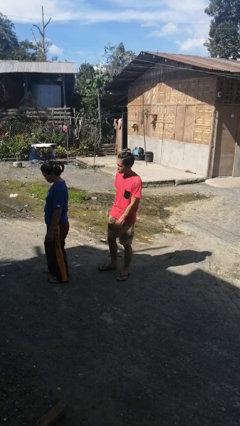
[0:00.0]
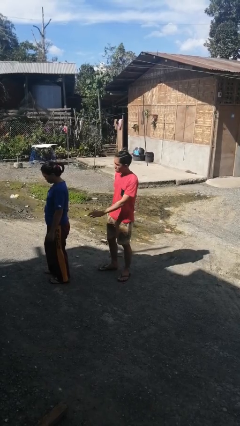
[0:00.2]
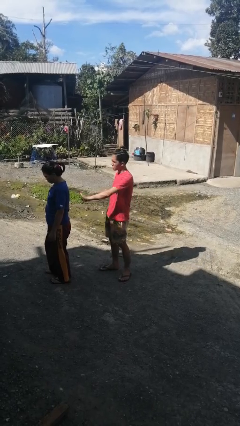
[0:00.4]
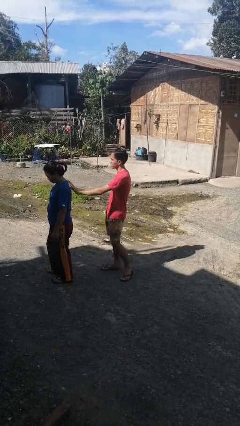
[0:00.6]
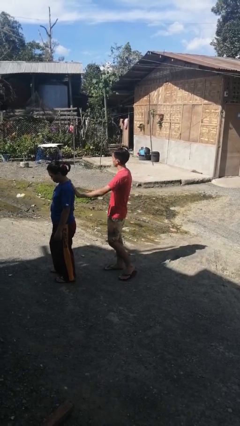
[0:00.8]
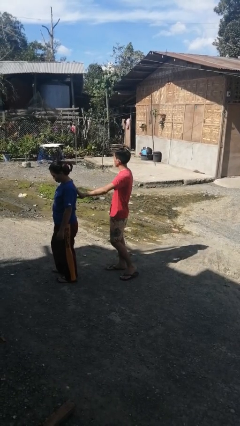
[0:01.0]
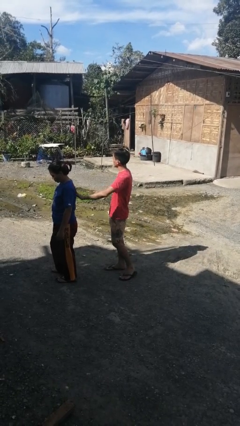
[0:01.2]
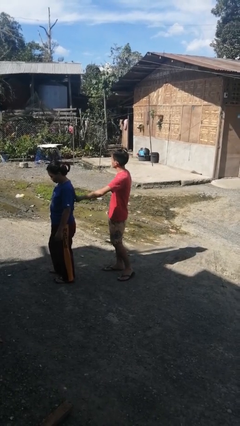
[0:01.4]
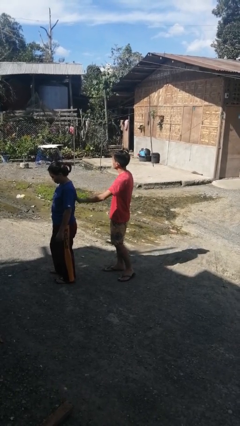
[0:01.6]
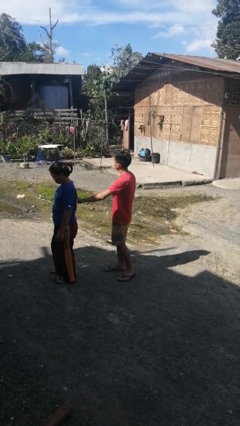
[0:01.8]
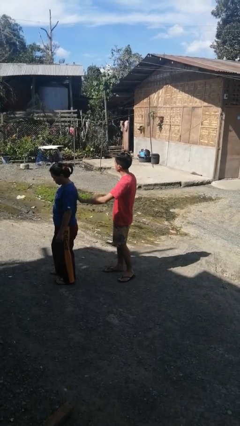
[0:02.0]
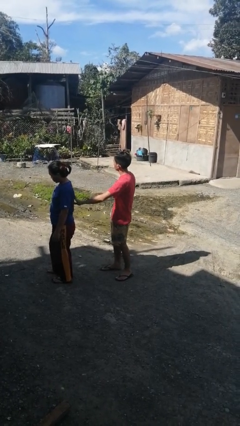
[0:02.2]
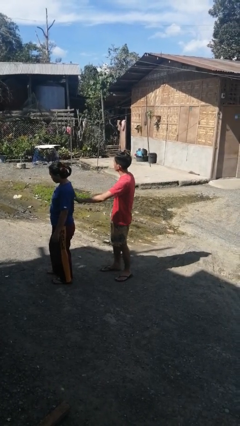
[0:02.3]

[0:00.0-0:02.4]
person touches back of person

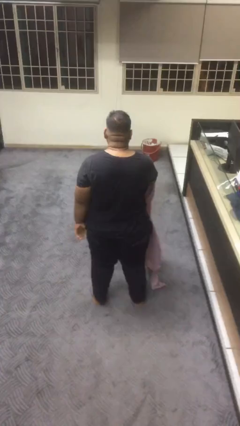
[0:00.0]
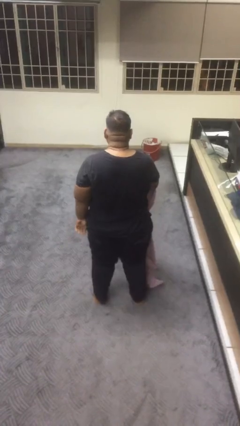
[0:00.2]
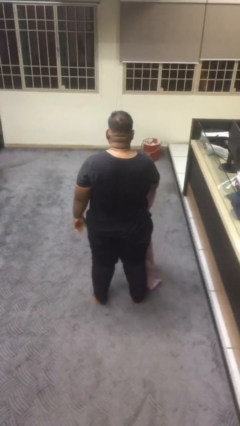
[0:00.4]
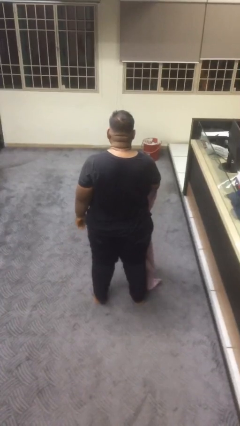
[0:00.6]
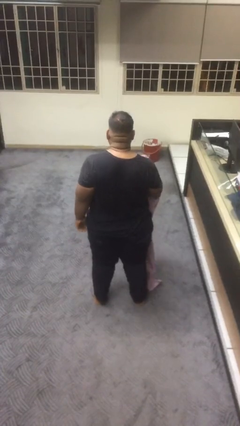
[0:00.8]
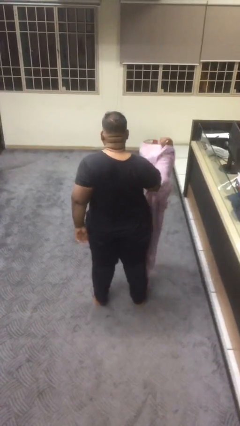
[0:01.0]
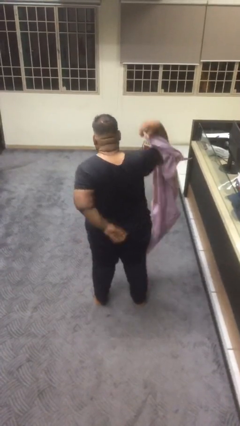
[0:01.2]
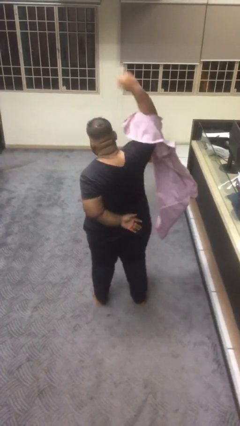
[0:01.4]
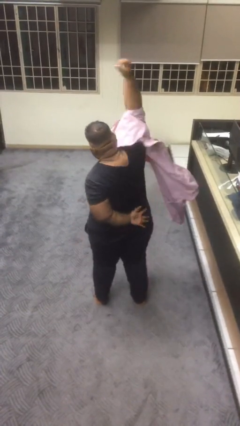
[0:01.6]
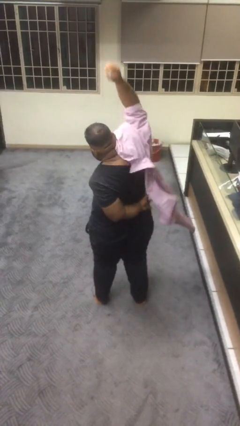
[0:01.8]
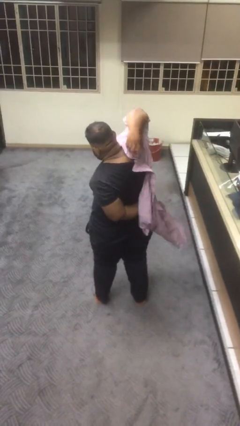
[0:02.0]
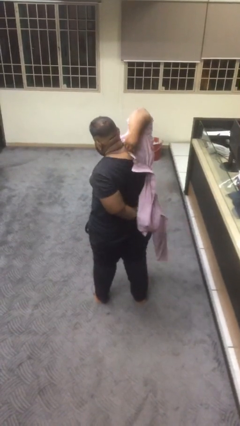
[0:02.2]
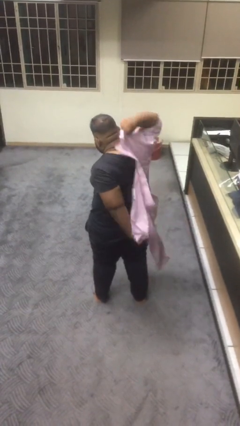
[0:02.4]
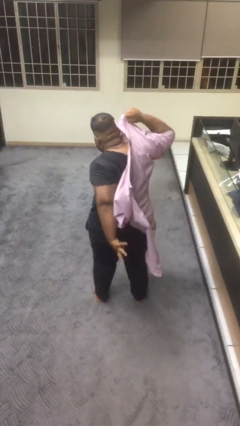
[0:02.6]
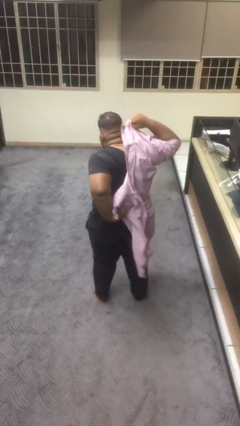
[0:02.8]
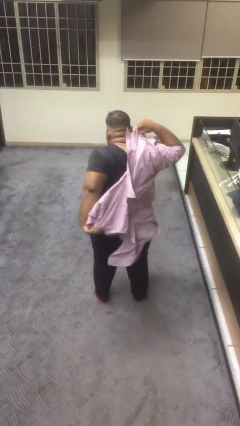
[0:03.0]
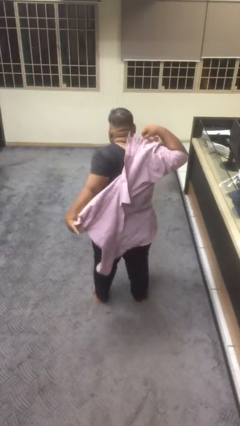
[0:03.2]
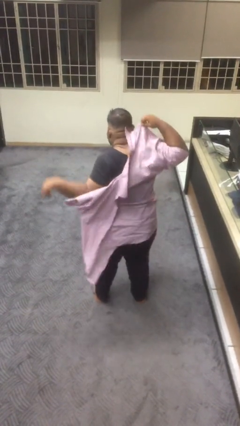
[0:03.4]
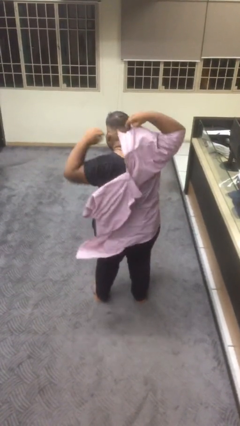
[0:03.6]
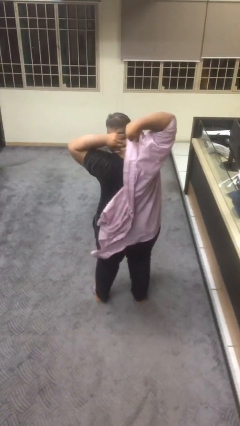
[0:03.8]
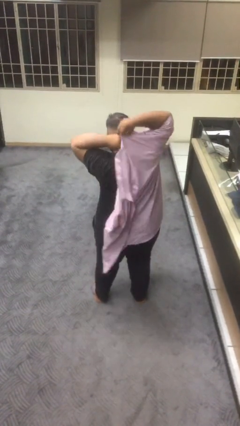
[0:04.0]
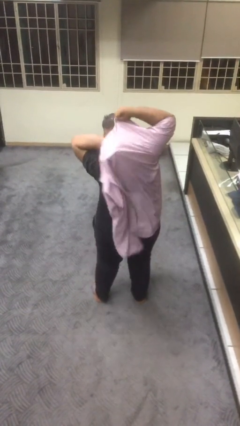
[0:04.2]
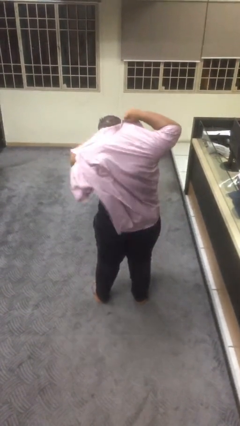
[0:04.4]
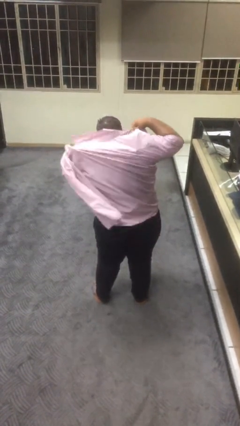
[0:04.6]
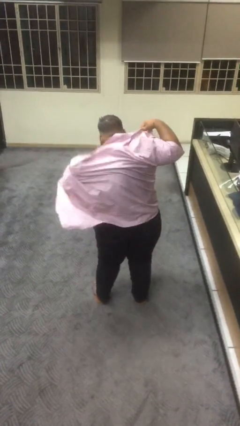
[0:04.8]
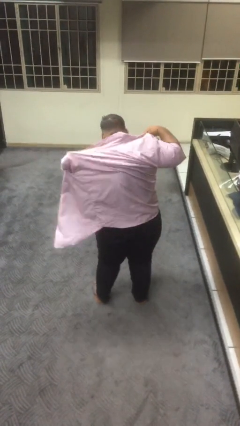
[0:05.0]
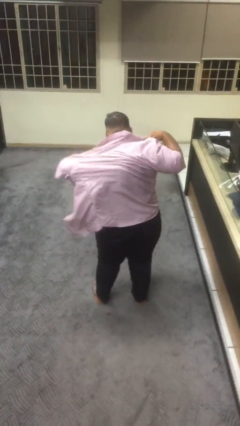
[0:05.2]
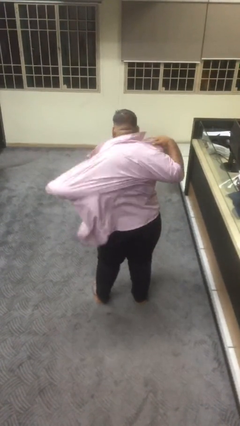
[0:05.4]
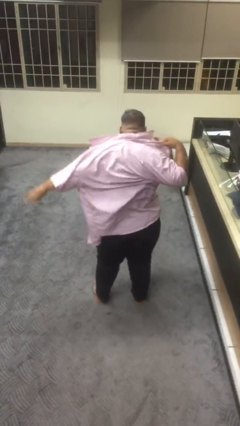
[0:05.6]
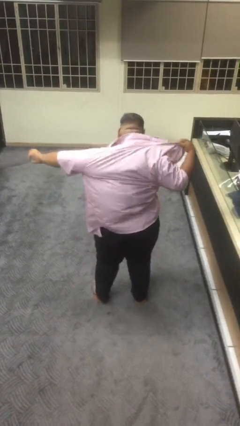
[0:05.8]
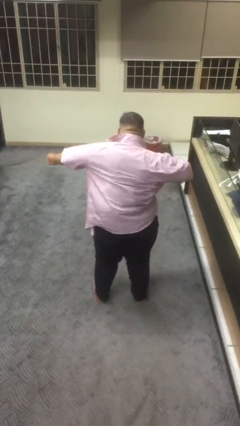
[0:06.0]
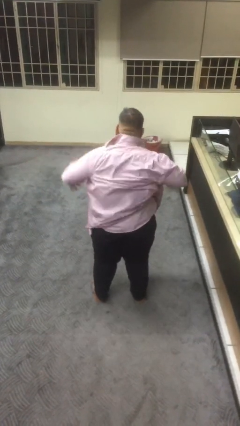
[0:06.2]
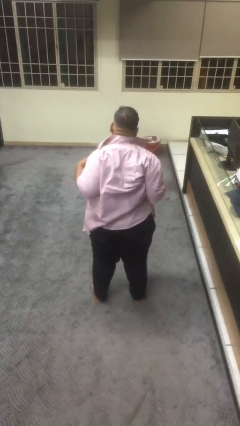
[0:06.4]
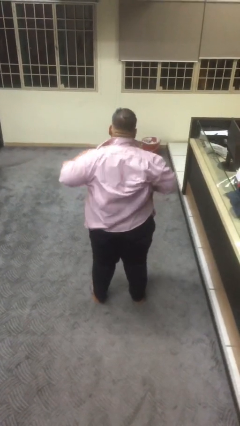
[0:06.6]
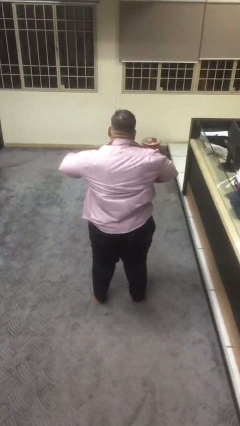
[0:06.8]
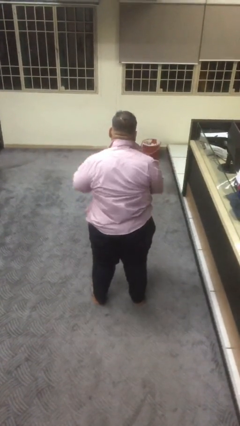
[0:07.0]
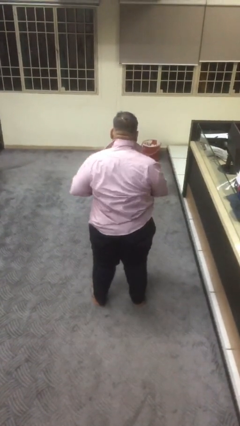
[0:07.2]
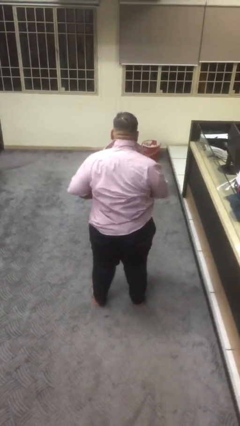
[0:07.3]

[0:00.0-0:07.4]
person puts on shirt

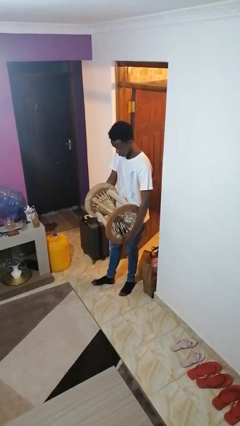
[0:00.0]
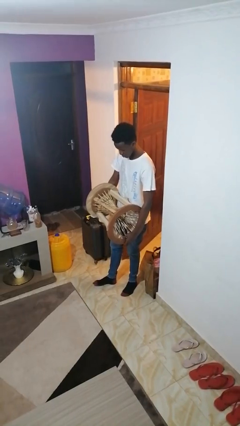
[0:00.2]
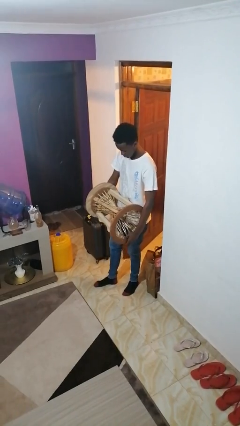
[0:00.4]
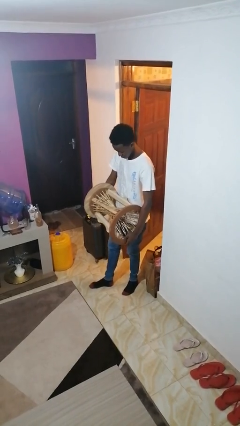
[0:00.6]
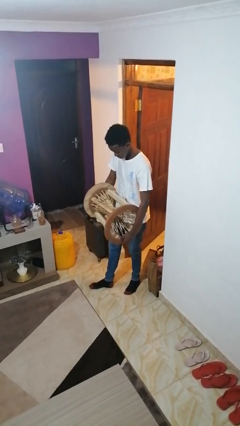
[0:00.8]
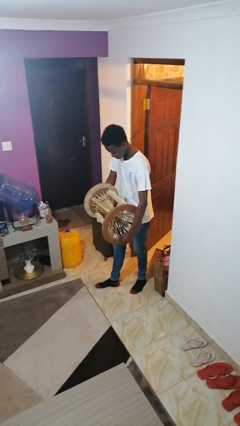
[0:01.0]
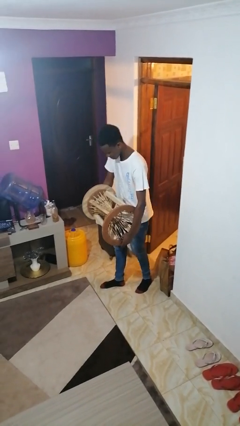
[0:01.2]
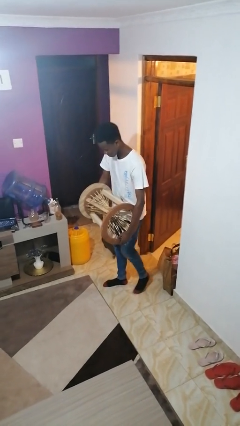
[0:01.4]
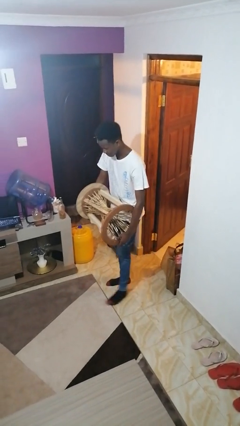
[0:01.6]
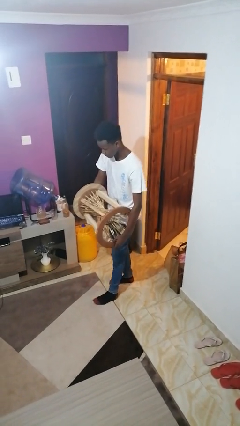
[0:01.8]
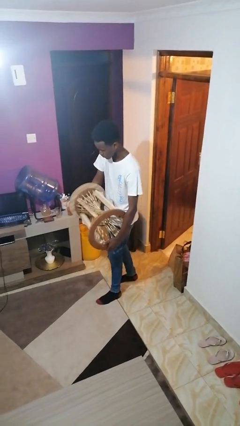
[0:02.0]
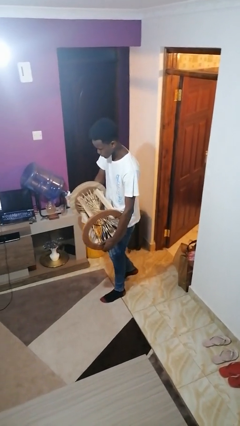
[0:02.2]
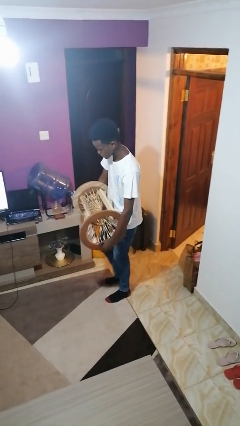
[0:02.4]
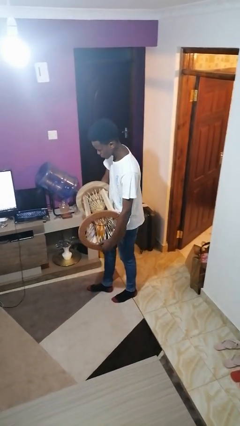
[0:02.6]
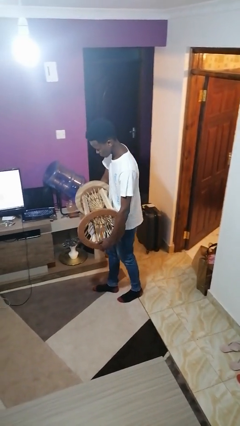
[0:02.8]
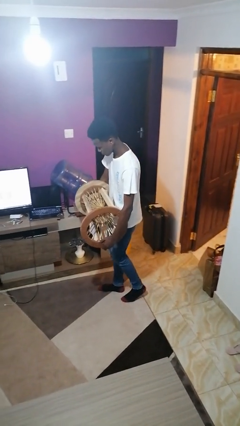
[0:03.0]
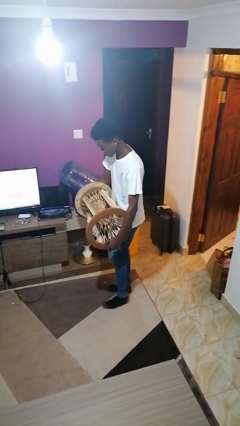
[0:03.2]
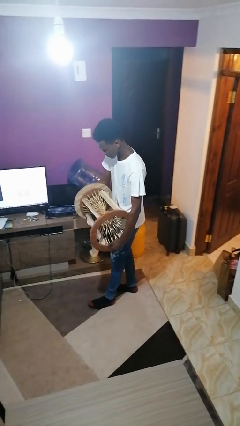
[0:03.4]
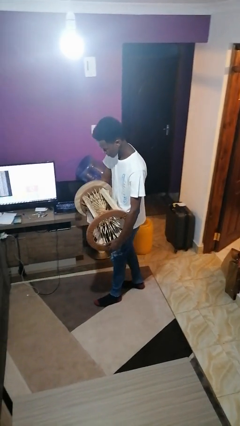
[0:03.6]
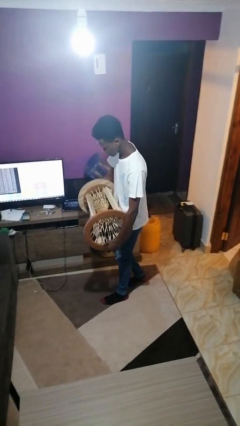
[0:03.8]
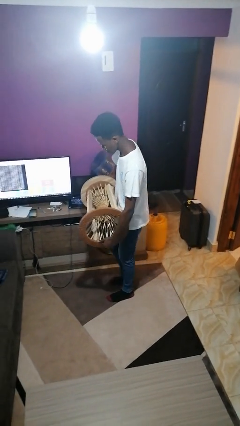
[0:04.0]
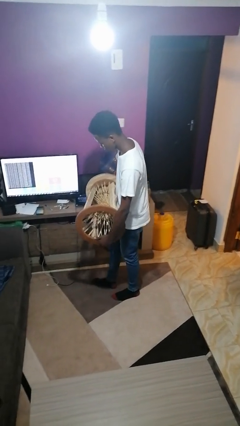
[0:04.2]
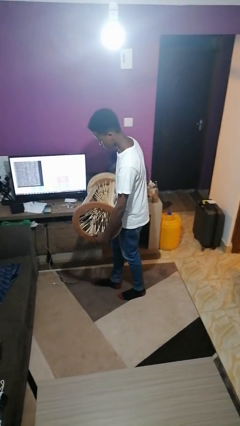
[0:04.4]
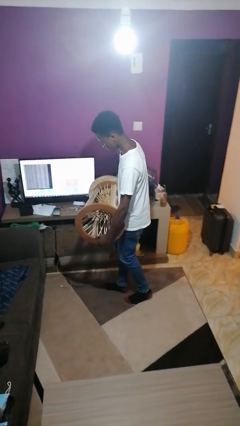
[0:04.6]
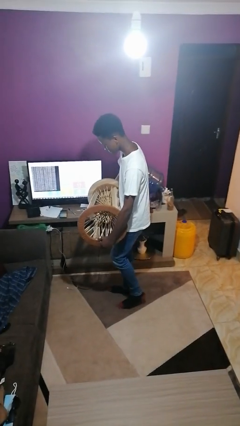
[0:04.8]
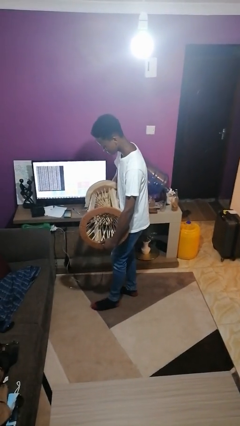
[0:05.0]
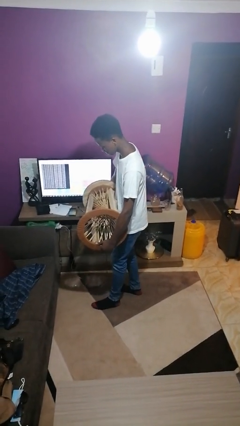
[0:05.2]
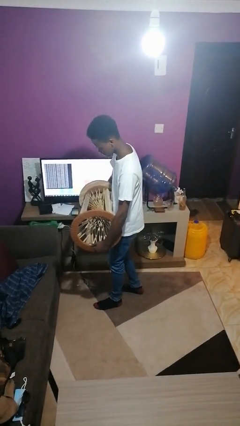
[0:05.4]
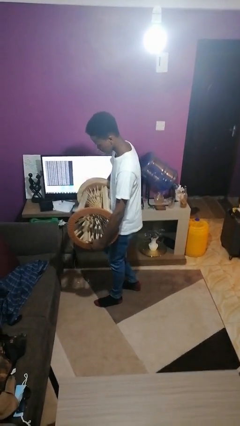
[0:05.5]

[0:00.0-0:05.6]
person carries furniture

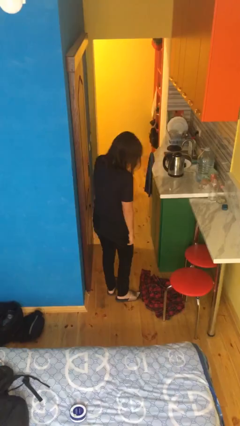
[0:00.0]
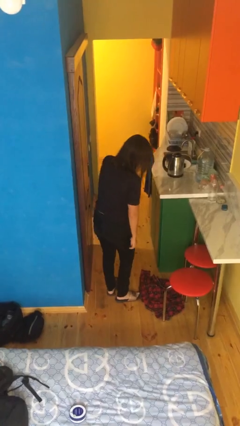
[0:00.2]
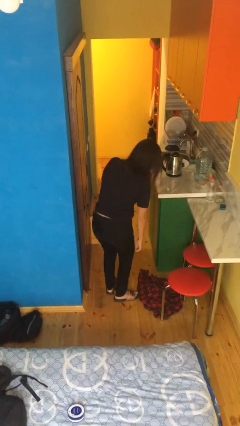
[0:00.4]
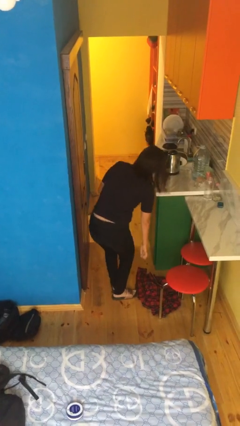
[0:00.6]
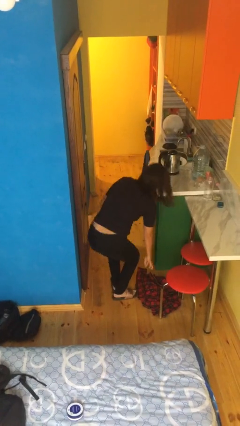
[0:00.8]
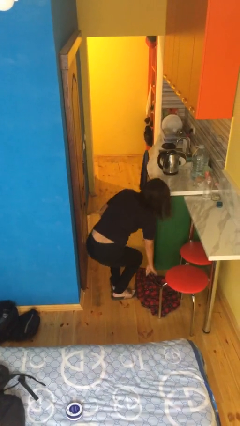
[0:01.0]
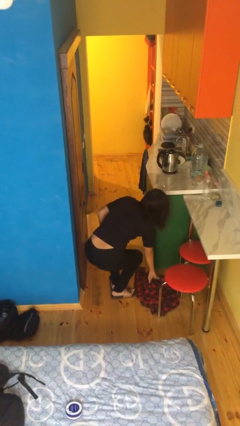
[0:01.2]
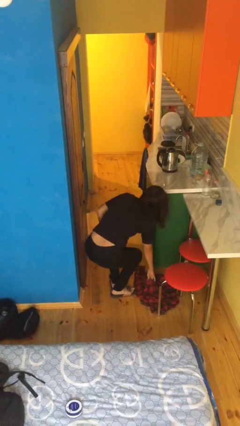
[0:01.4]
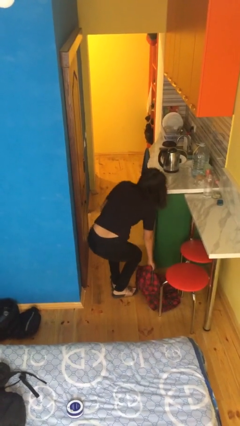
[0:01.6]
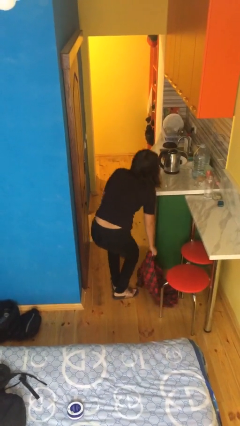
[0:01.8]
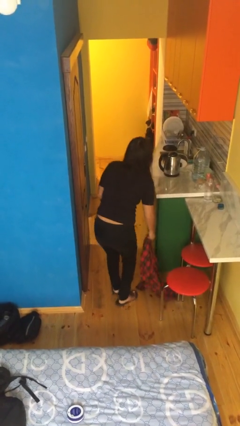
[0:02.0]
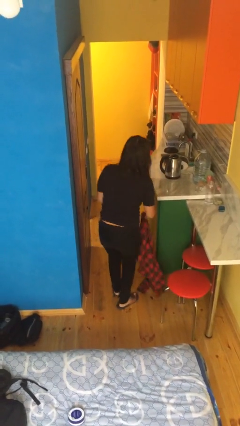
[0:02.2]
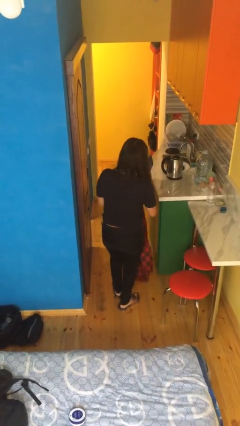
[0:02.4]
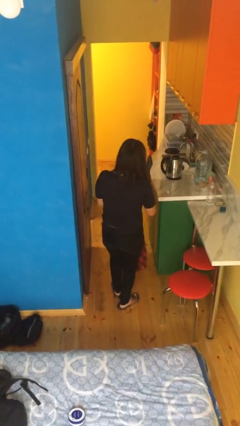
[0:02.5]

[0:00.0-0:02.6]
person picks up object from floor

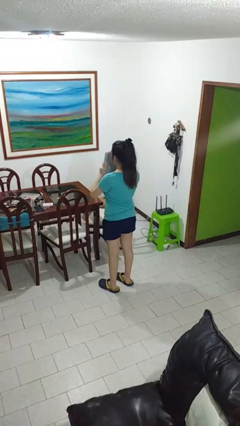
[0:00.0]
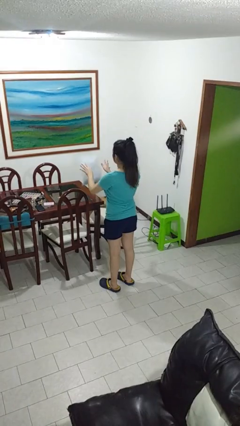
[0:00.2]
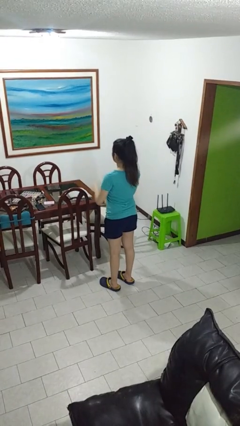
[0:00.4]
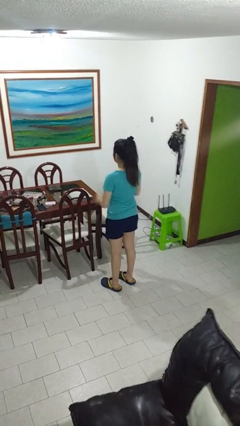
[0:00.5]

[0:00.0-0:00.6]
person throws object on table
